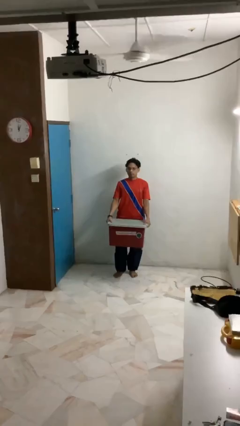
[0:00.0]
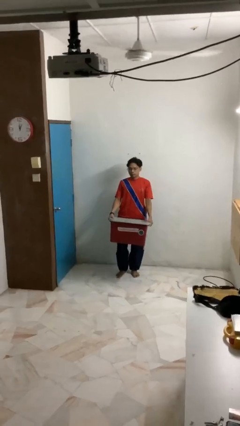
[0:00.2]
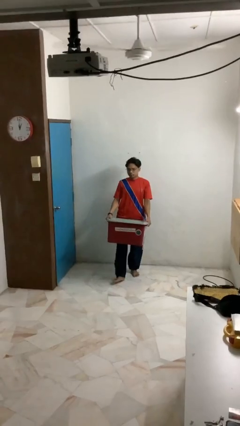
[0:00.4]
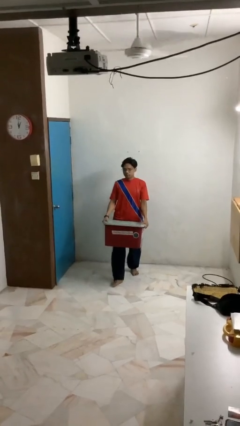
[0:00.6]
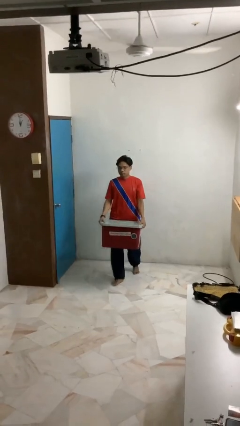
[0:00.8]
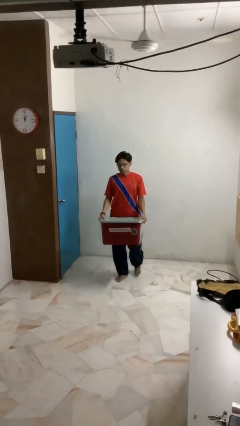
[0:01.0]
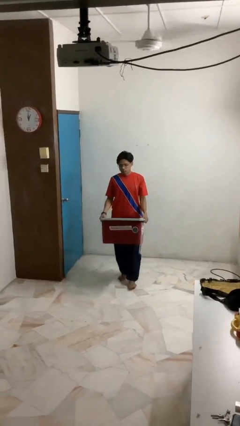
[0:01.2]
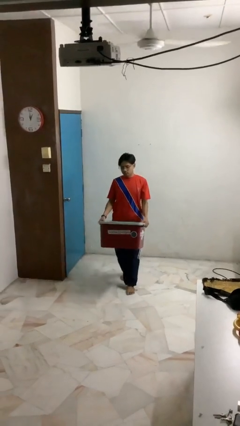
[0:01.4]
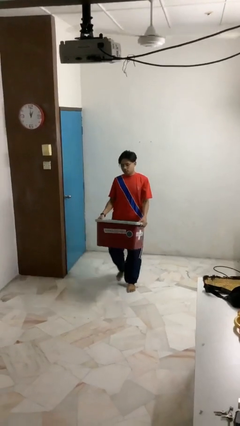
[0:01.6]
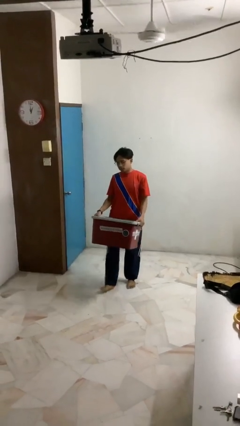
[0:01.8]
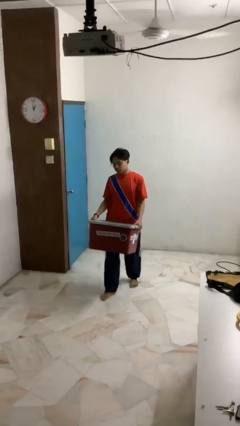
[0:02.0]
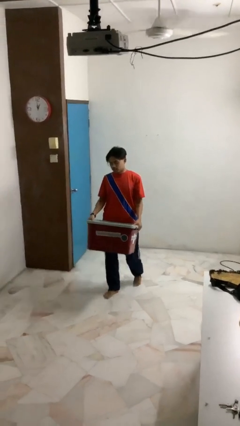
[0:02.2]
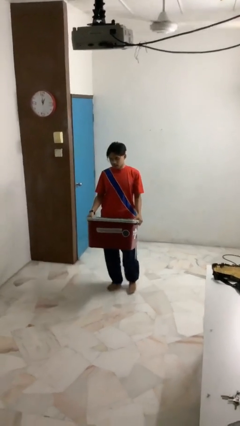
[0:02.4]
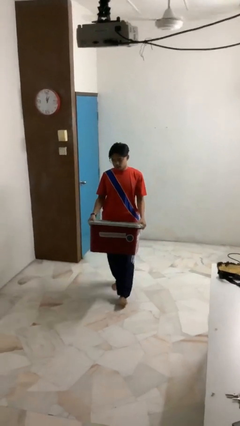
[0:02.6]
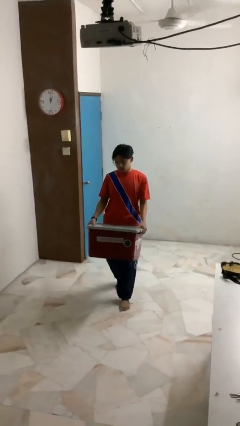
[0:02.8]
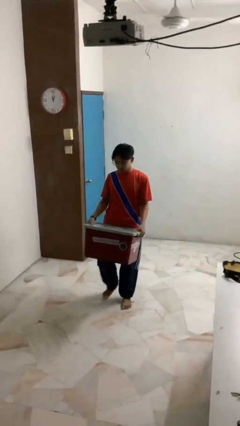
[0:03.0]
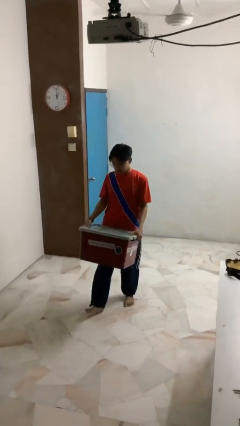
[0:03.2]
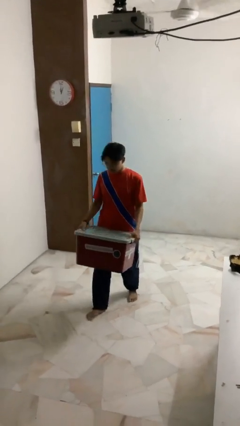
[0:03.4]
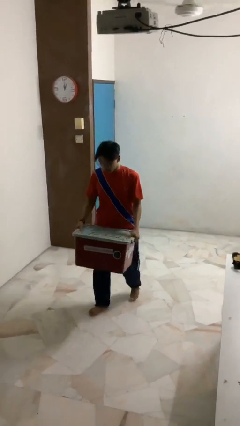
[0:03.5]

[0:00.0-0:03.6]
person carries heavy object

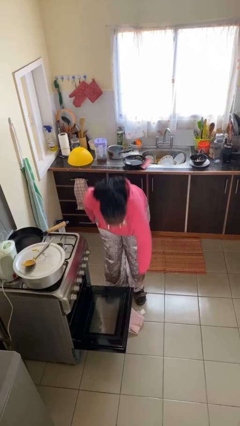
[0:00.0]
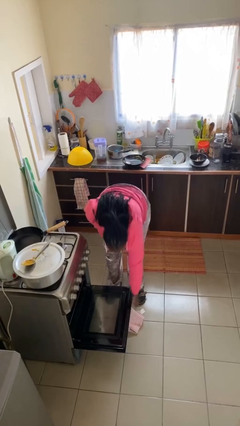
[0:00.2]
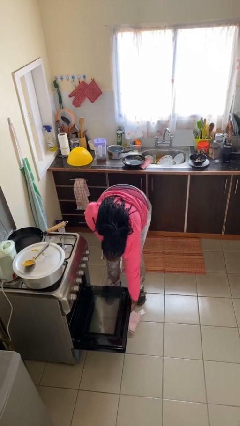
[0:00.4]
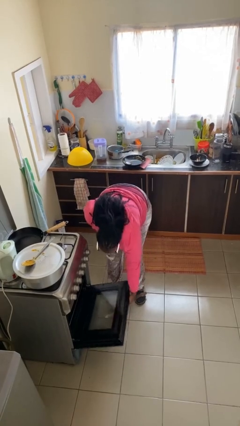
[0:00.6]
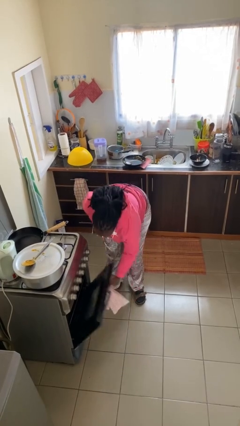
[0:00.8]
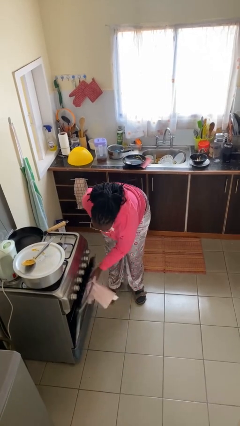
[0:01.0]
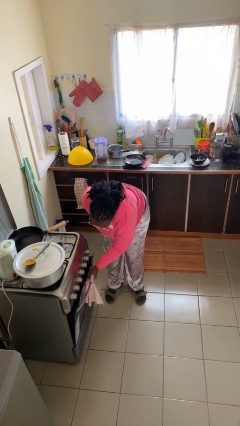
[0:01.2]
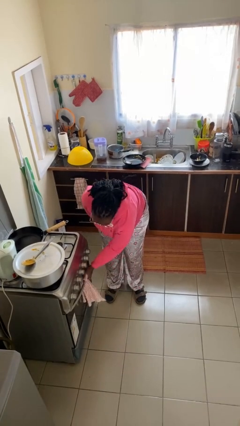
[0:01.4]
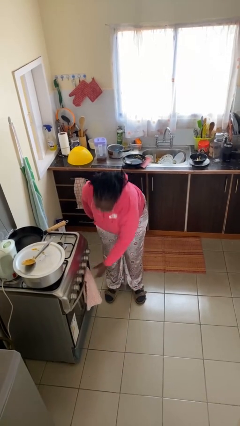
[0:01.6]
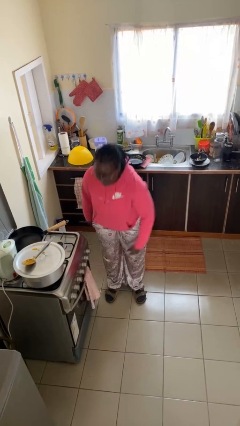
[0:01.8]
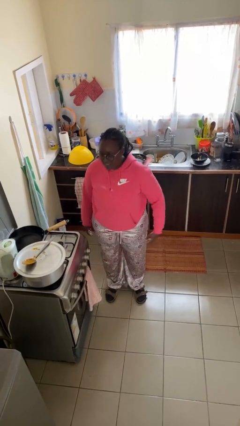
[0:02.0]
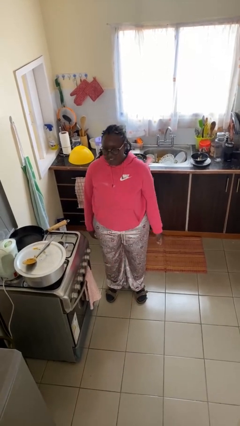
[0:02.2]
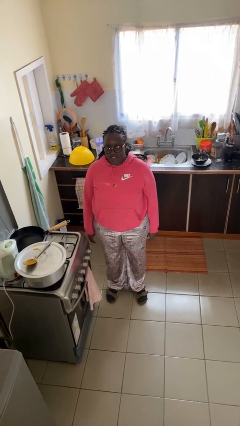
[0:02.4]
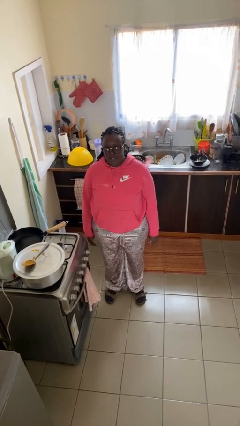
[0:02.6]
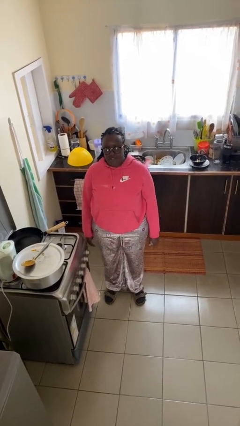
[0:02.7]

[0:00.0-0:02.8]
person closes oven door

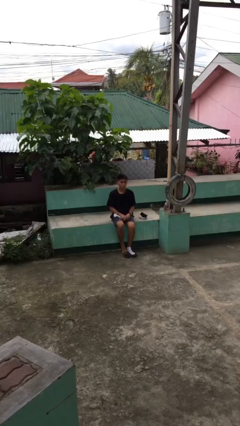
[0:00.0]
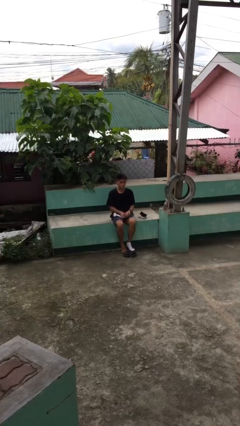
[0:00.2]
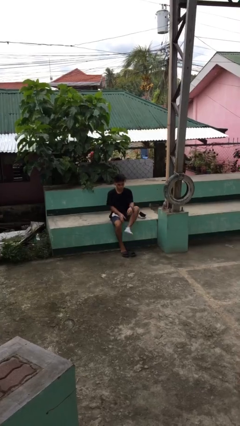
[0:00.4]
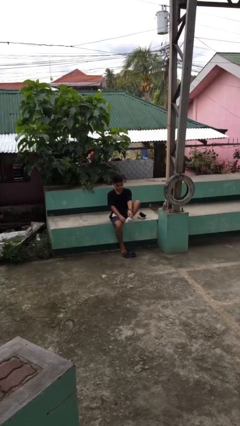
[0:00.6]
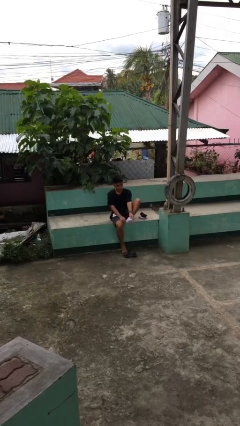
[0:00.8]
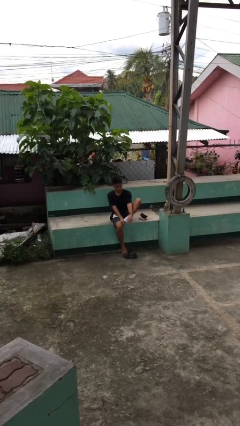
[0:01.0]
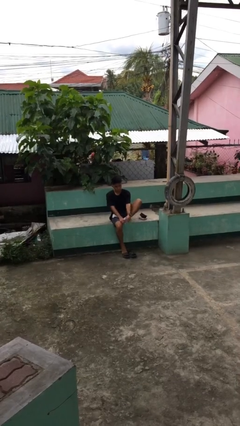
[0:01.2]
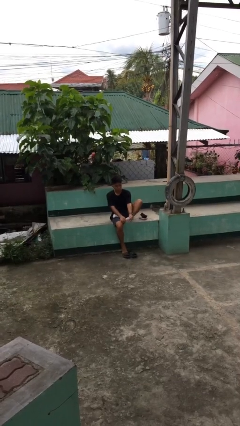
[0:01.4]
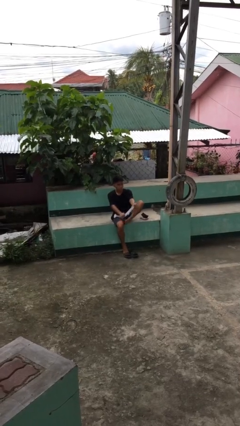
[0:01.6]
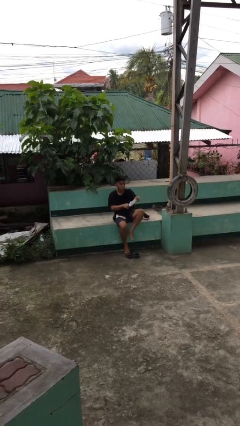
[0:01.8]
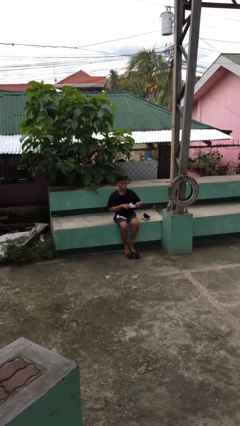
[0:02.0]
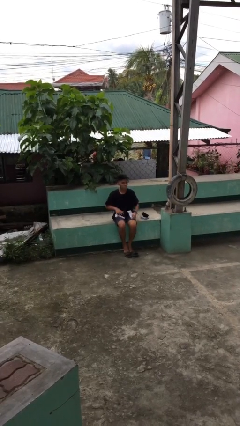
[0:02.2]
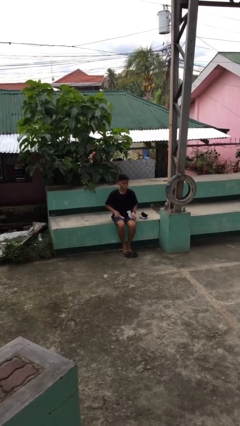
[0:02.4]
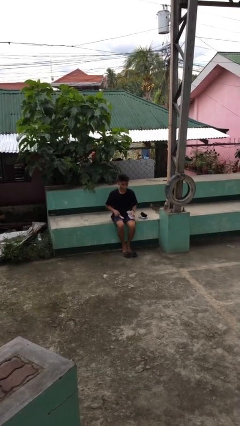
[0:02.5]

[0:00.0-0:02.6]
person takes off socks

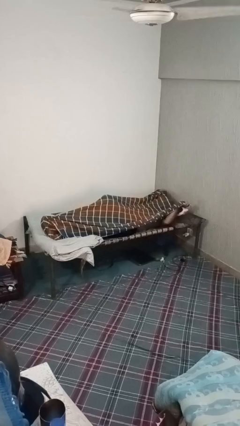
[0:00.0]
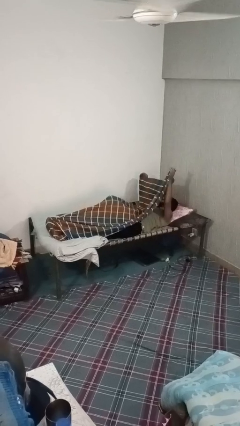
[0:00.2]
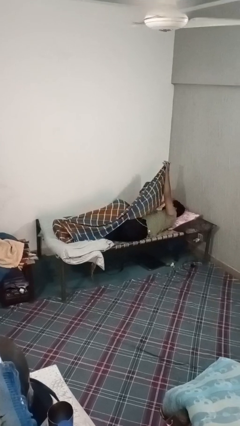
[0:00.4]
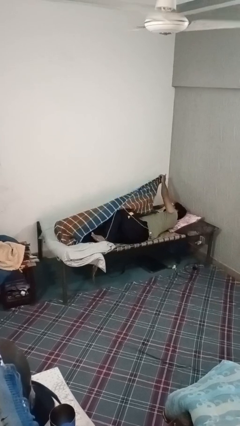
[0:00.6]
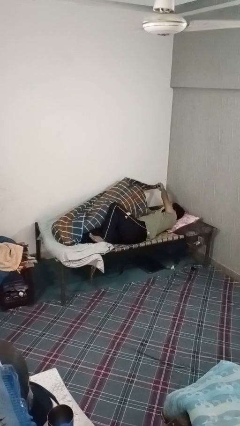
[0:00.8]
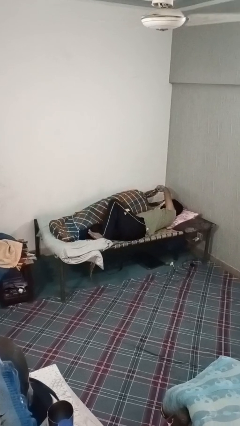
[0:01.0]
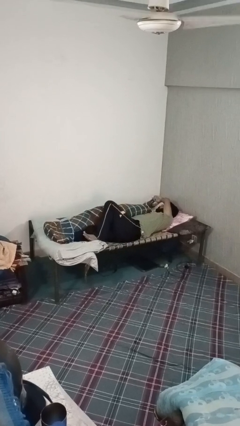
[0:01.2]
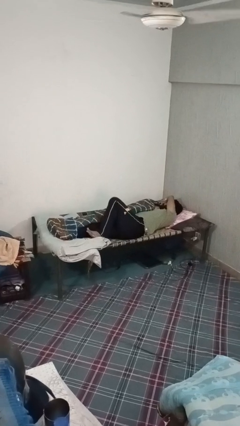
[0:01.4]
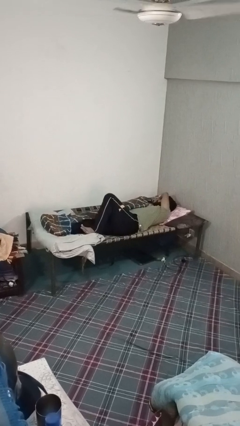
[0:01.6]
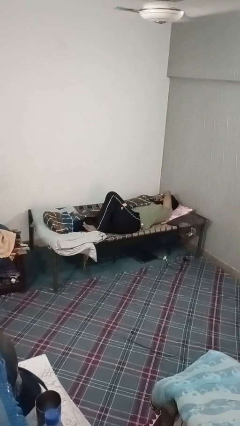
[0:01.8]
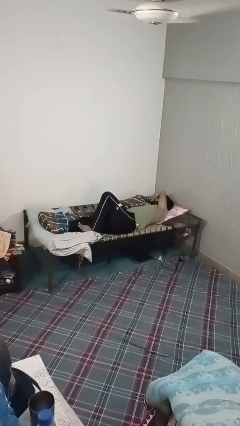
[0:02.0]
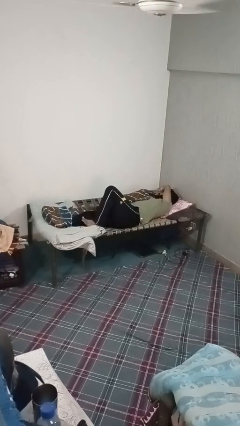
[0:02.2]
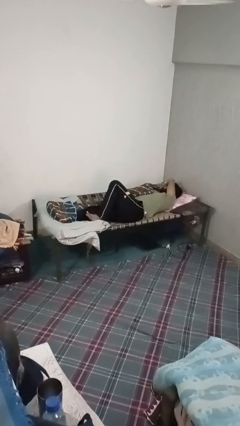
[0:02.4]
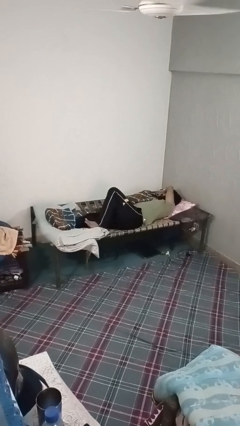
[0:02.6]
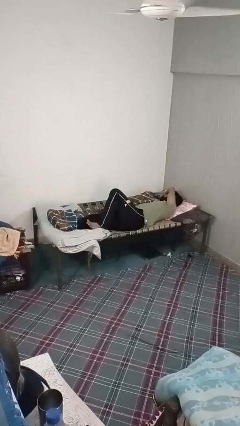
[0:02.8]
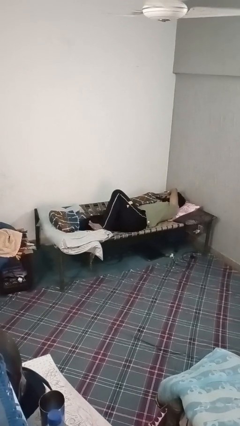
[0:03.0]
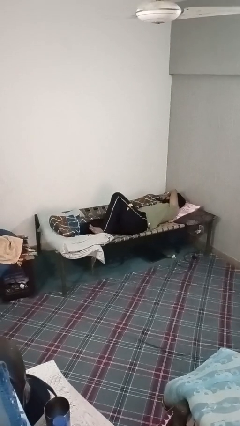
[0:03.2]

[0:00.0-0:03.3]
person uncovers with bedsheets

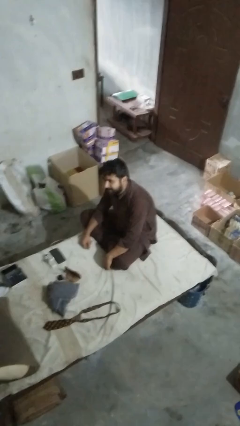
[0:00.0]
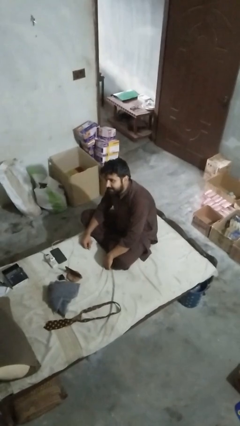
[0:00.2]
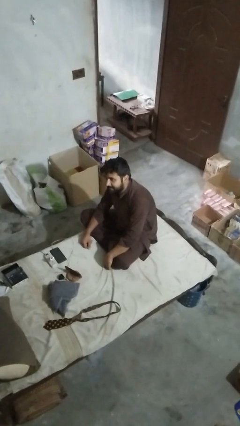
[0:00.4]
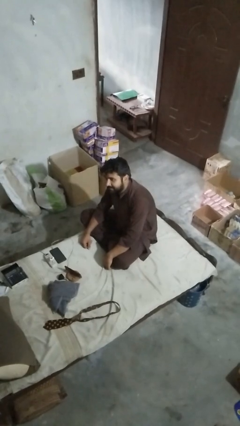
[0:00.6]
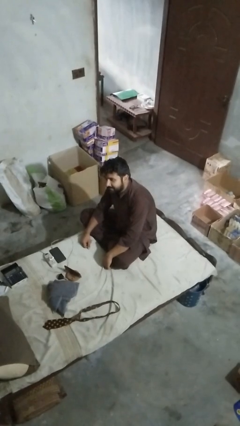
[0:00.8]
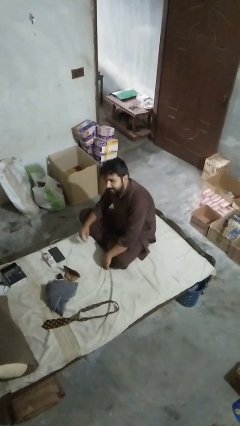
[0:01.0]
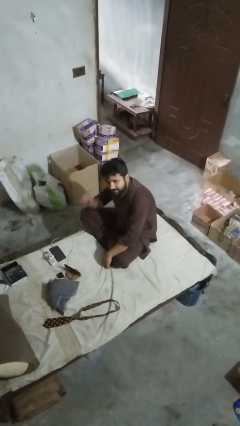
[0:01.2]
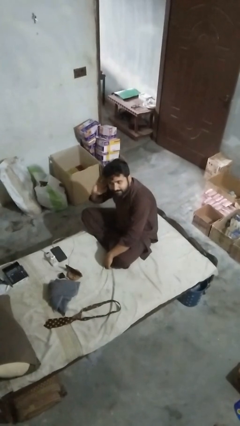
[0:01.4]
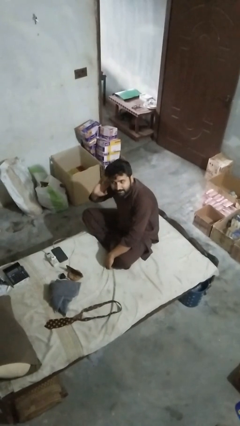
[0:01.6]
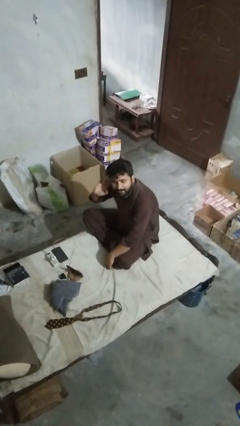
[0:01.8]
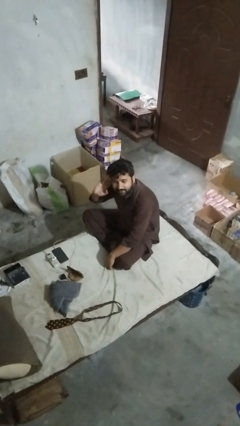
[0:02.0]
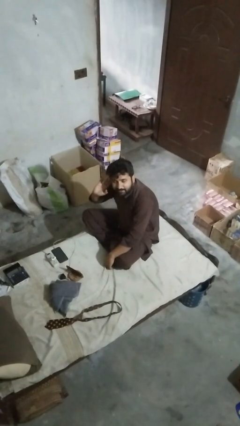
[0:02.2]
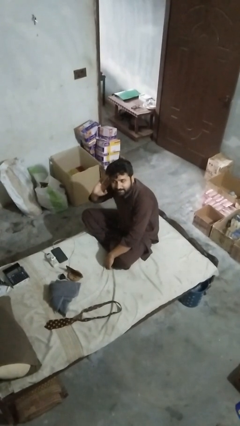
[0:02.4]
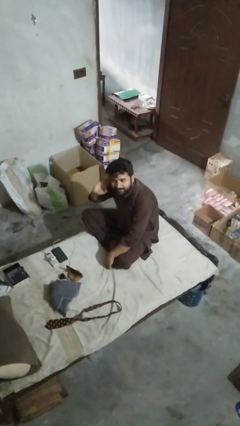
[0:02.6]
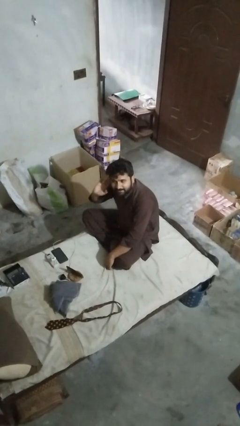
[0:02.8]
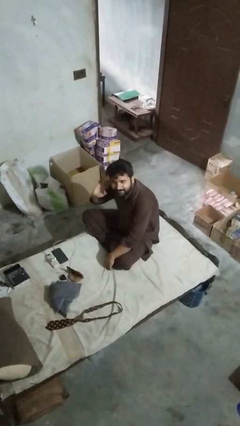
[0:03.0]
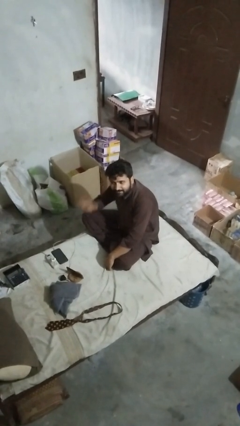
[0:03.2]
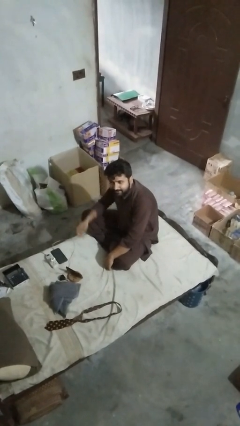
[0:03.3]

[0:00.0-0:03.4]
person gestures listen closely

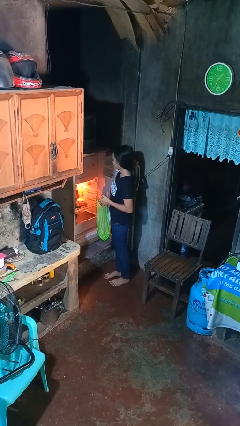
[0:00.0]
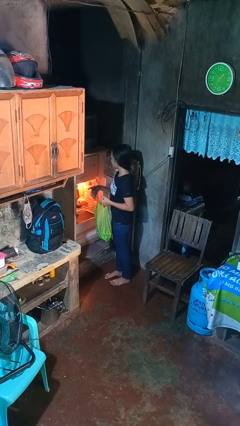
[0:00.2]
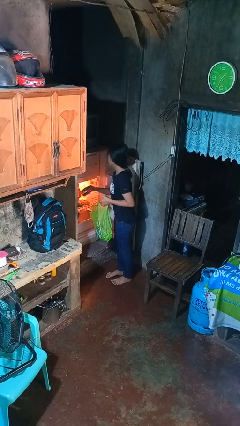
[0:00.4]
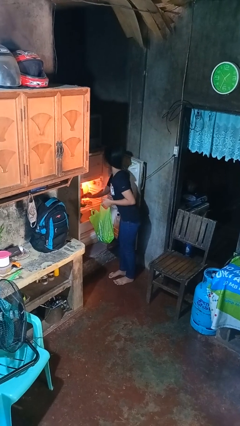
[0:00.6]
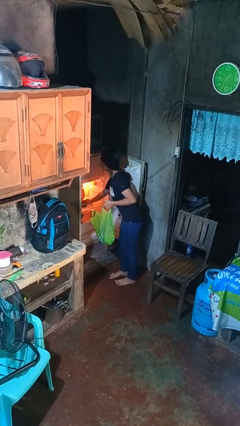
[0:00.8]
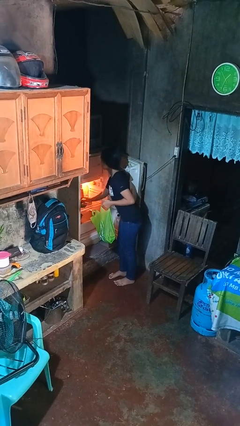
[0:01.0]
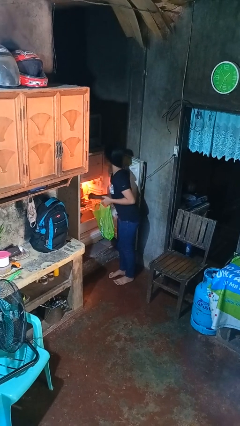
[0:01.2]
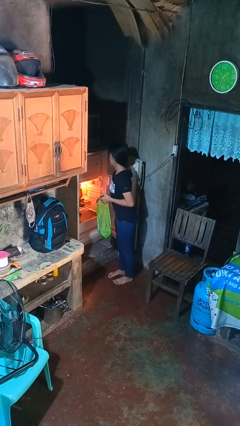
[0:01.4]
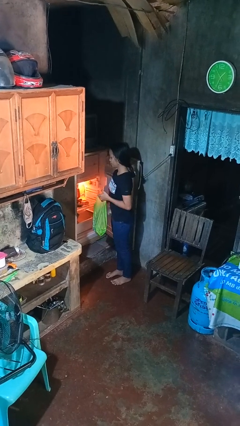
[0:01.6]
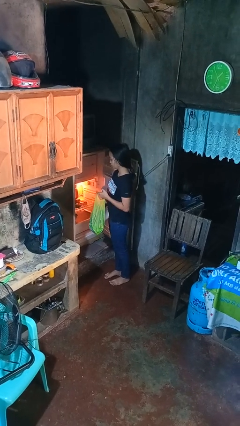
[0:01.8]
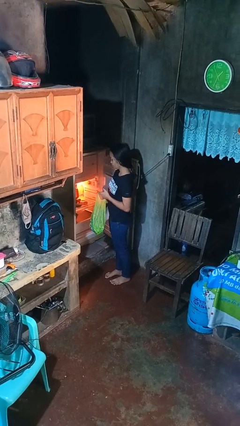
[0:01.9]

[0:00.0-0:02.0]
person loads groceries into refrigerator
